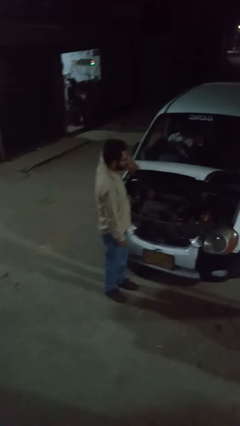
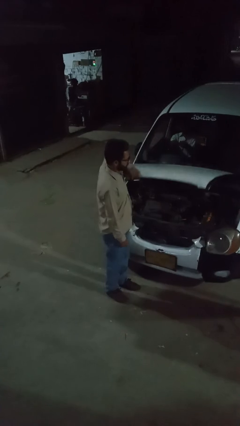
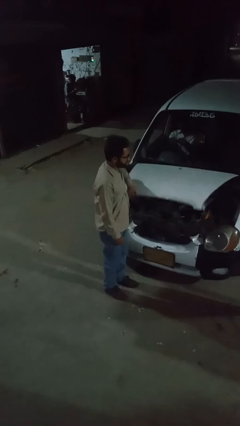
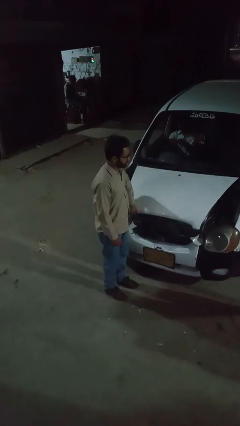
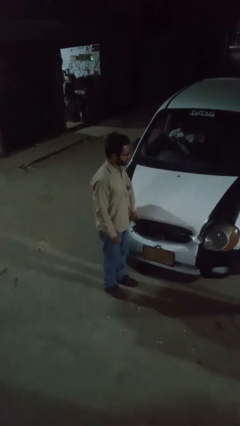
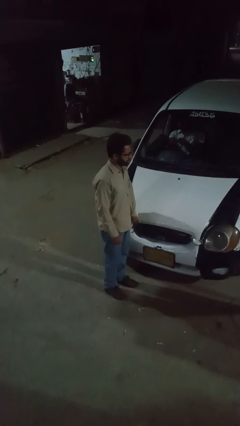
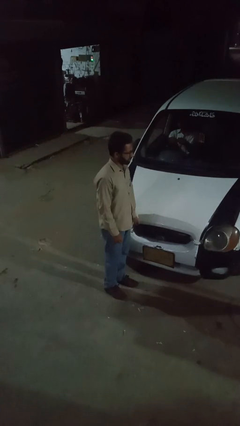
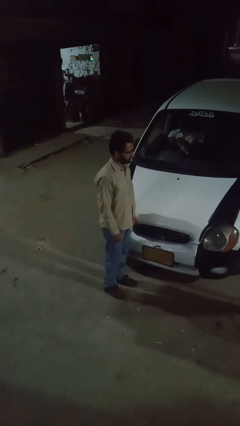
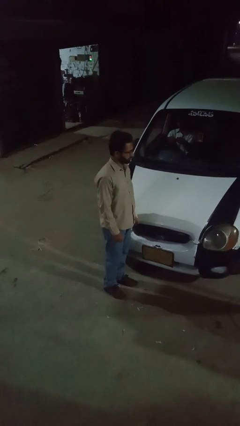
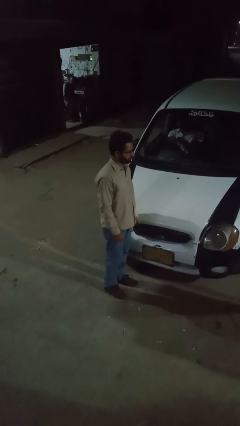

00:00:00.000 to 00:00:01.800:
person closes car hood

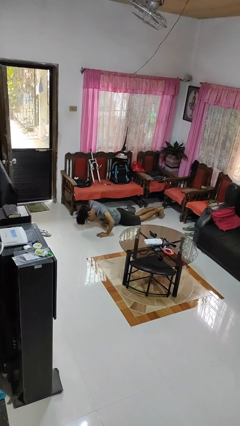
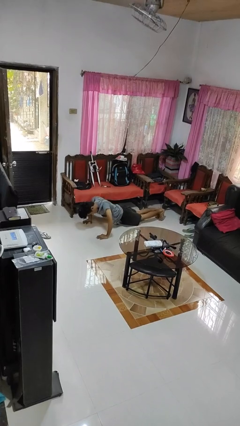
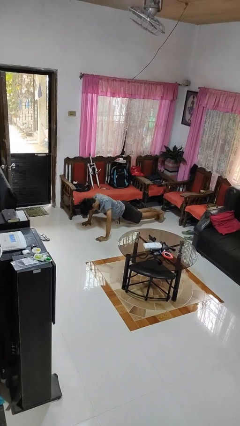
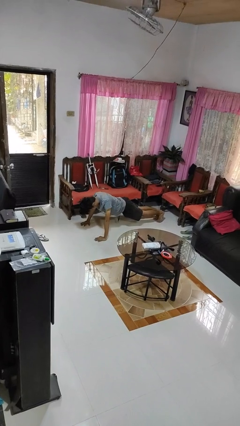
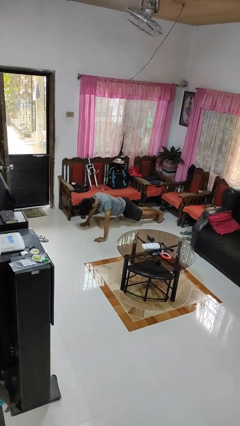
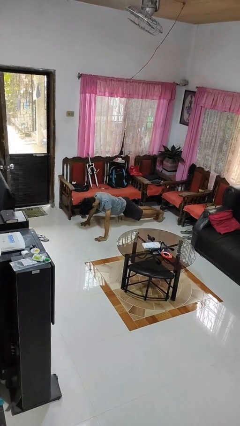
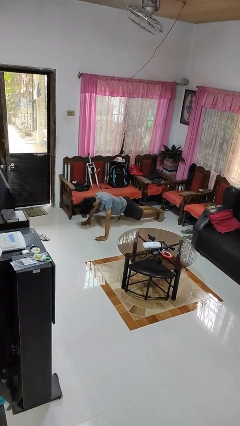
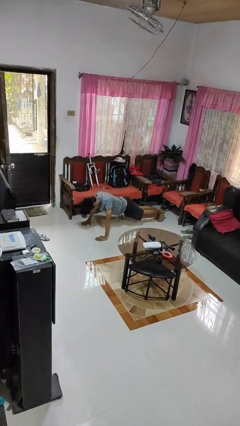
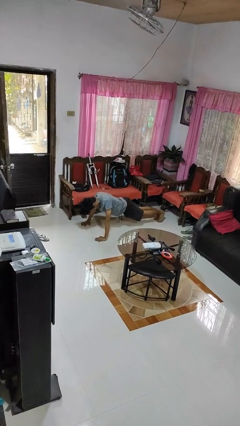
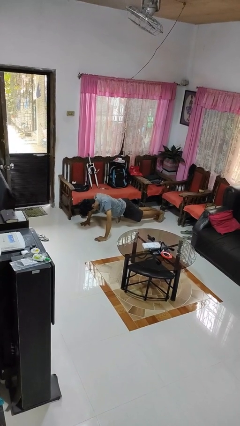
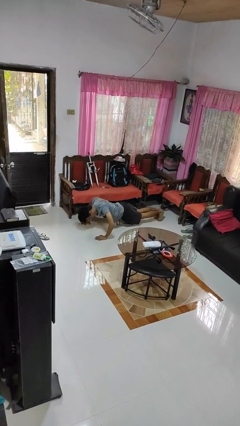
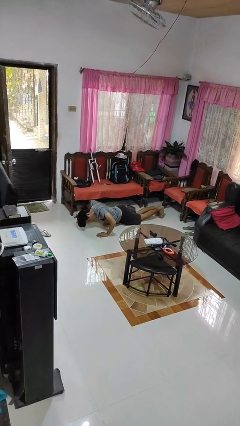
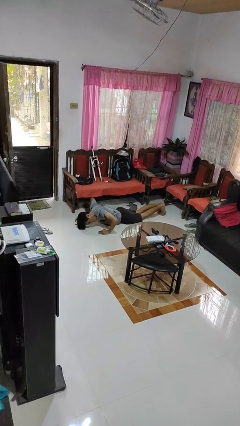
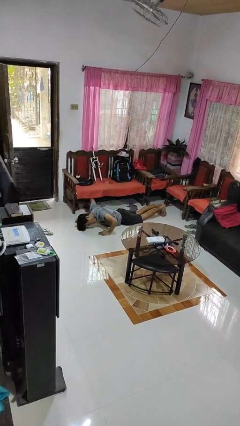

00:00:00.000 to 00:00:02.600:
person exercises with pushup

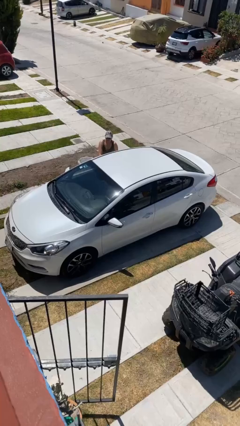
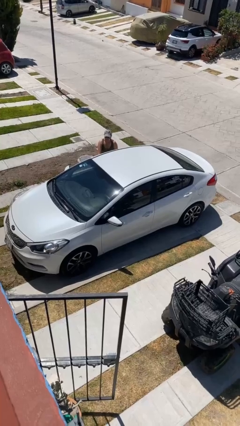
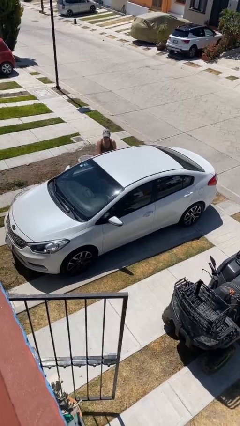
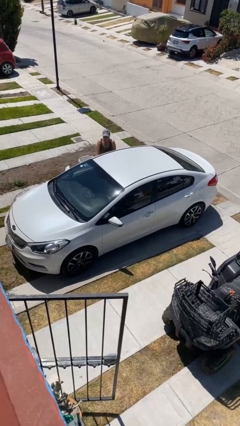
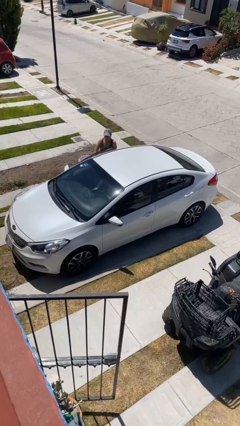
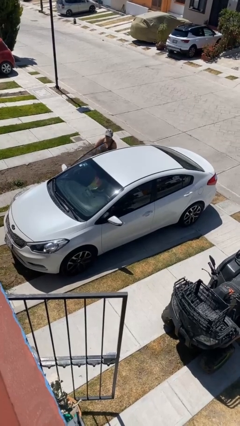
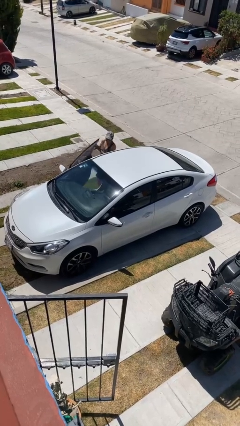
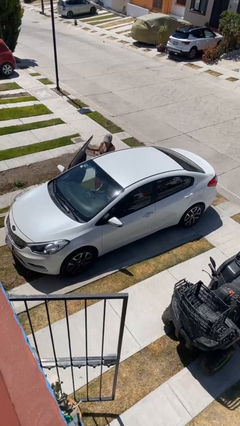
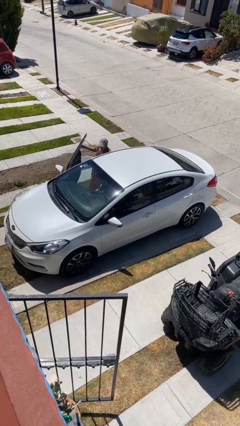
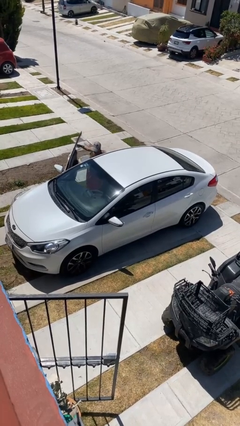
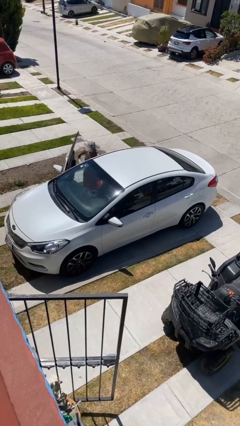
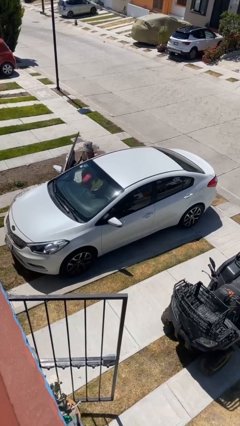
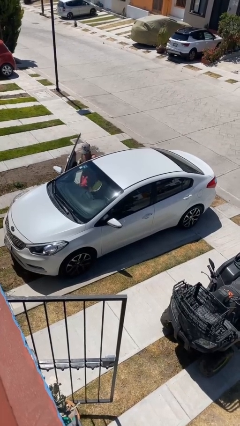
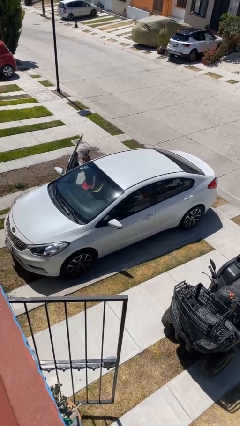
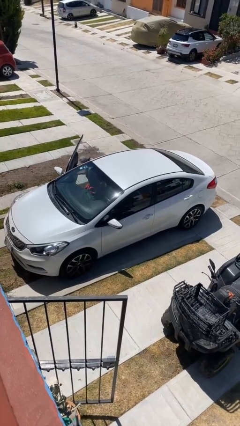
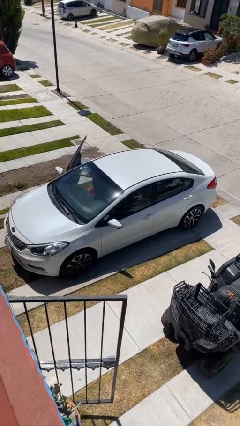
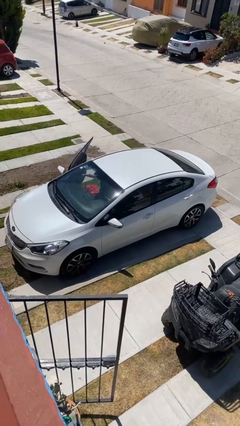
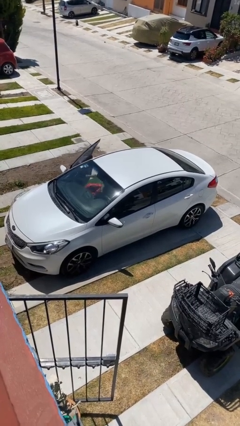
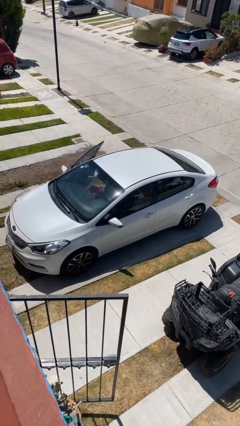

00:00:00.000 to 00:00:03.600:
car picks up person

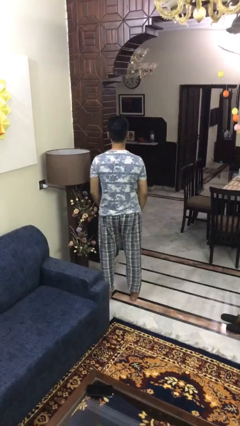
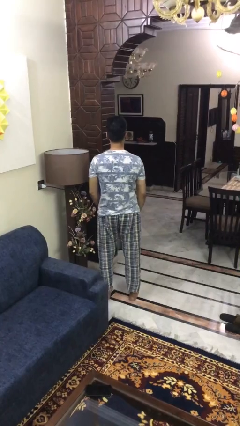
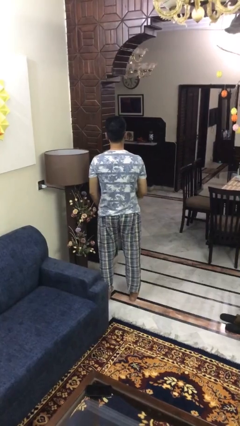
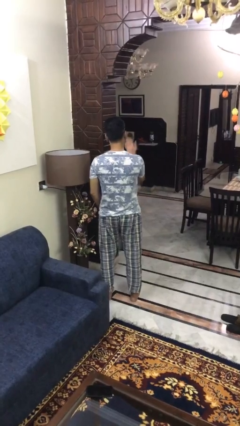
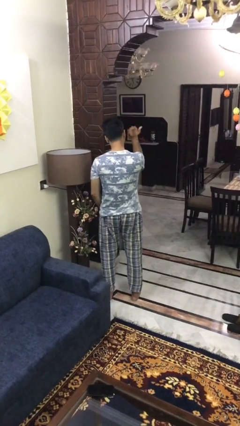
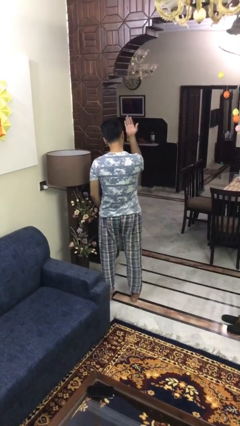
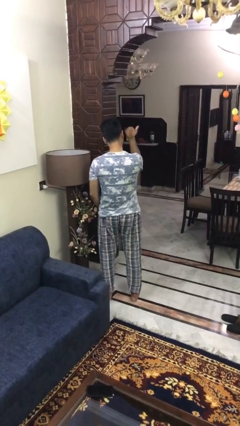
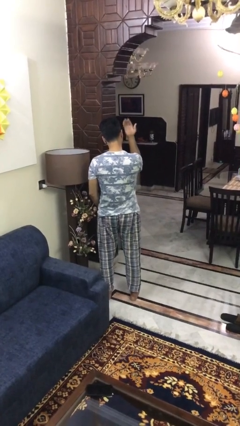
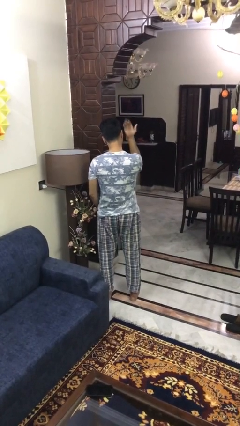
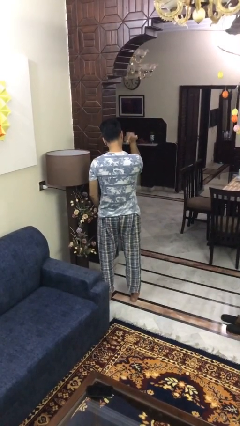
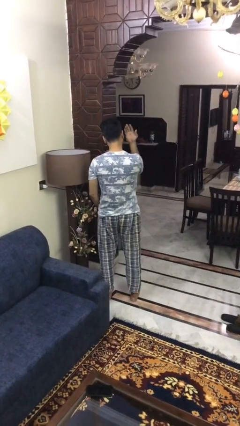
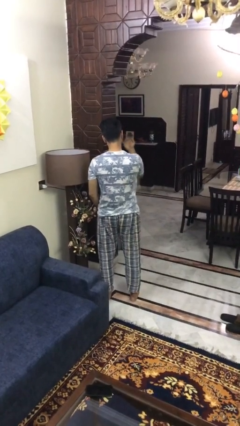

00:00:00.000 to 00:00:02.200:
person gestures come here

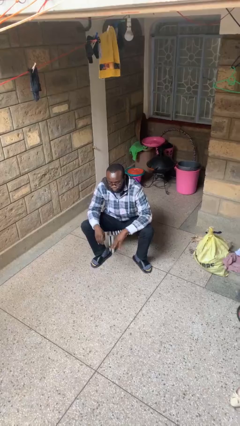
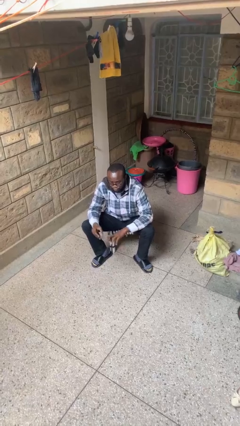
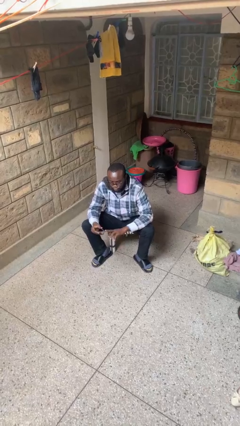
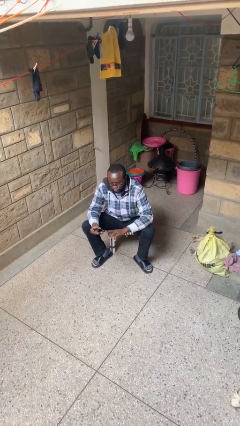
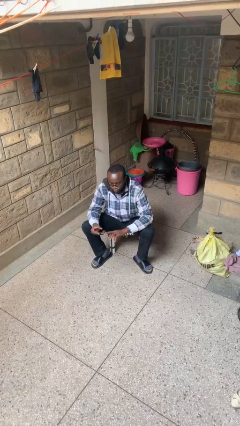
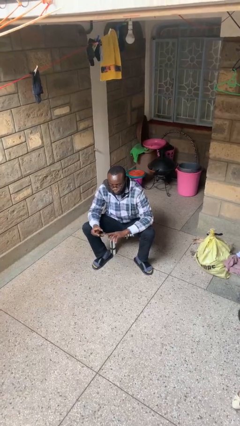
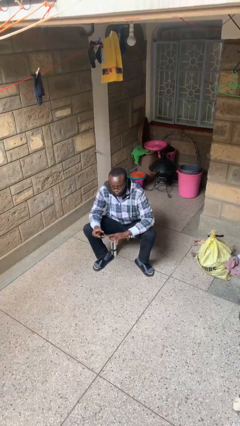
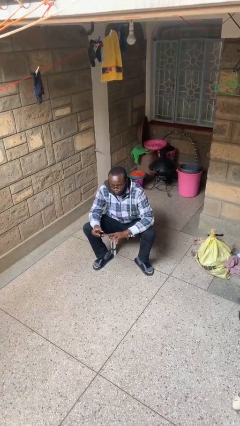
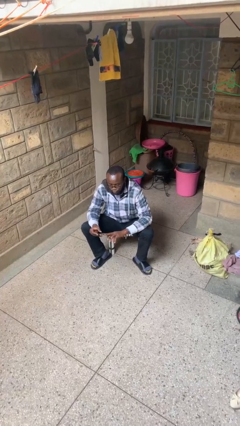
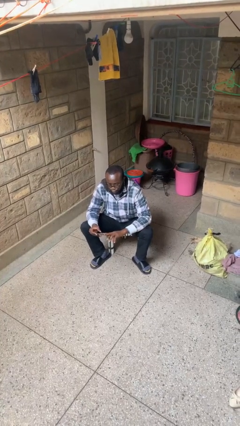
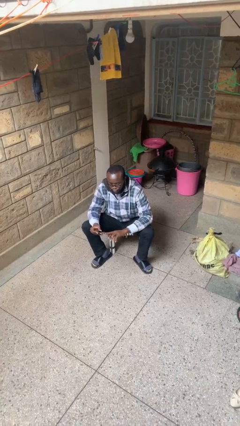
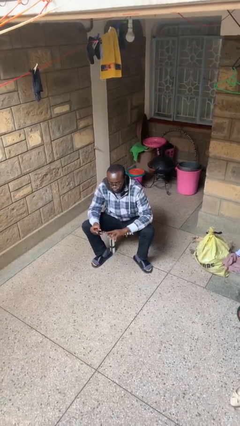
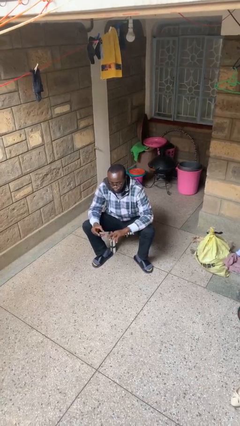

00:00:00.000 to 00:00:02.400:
person clips fingernails

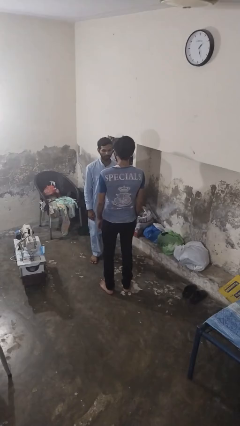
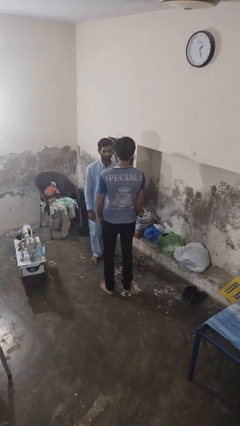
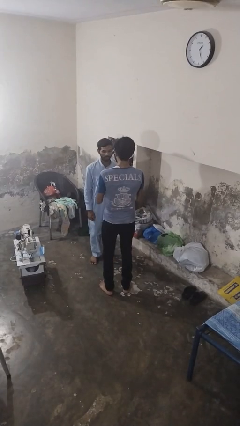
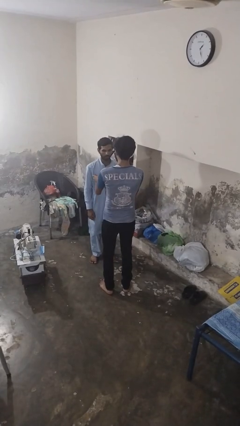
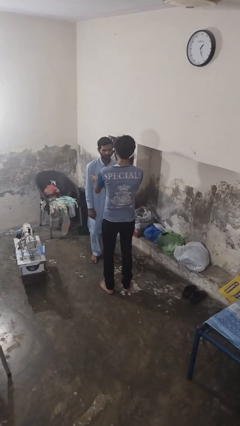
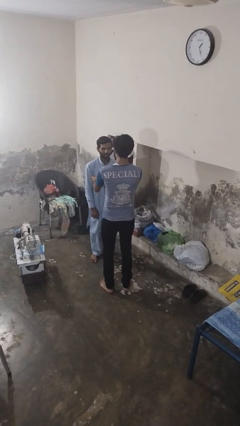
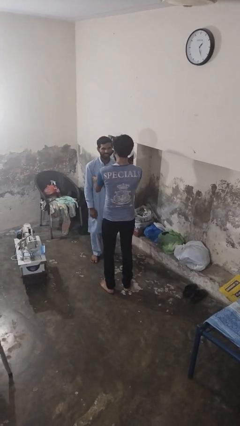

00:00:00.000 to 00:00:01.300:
person tickles person

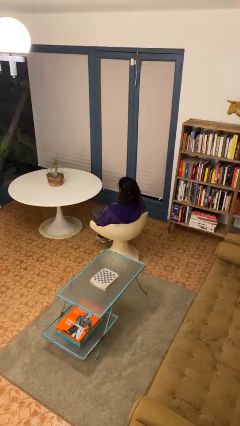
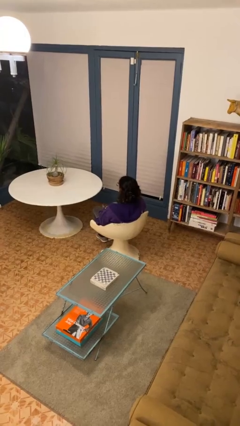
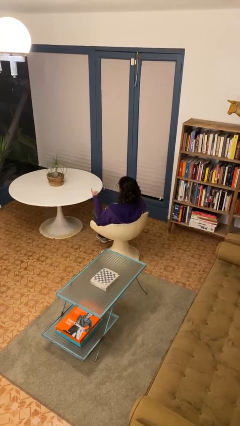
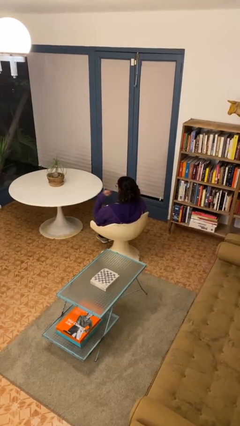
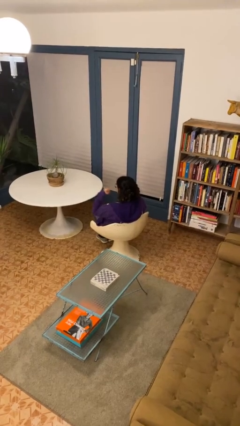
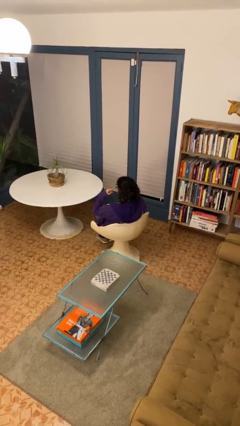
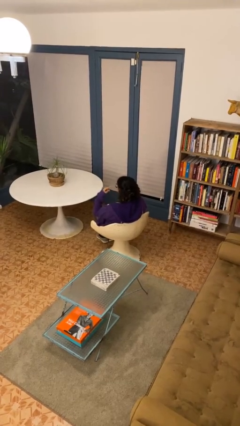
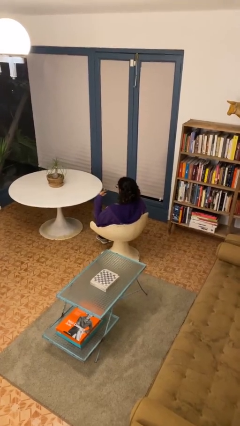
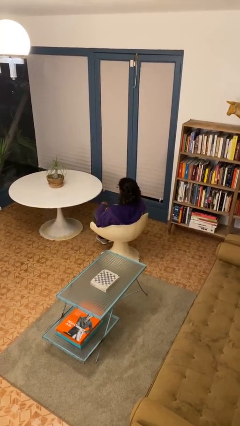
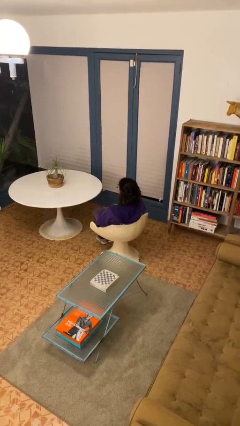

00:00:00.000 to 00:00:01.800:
person gestures listen closely

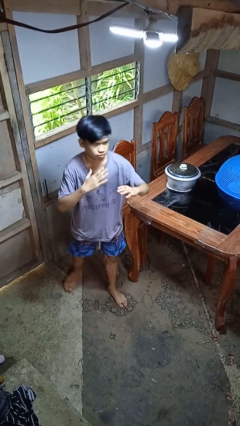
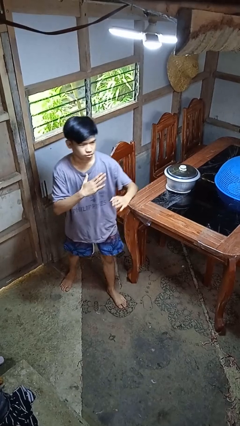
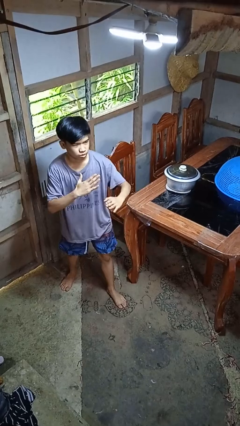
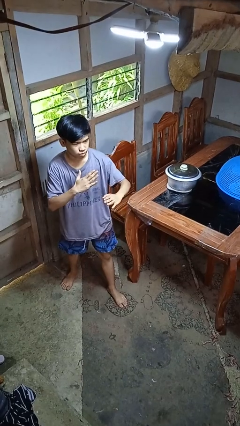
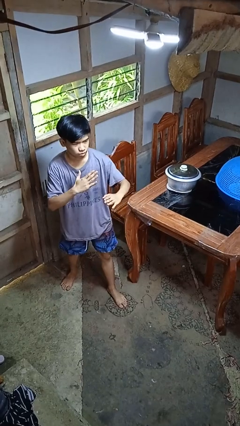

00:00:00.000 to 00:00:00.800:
person karate chop

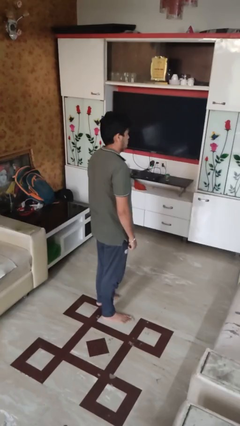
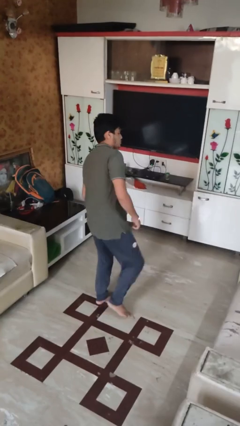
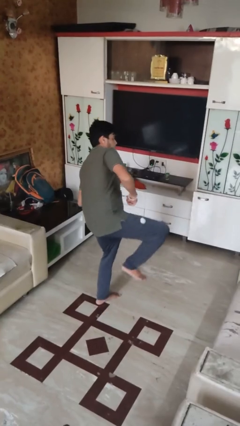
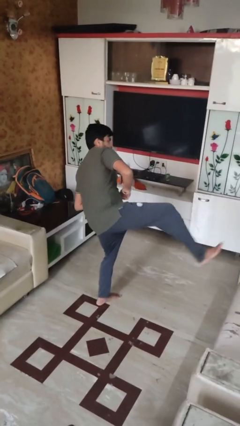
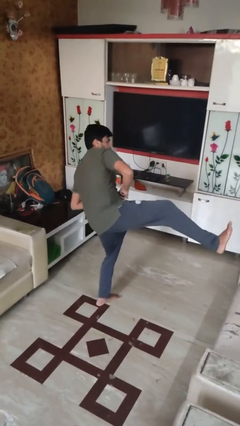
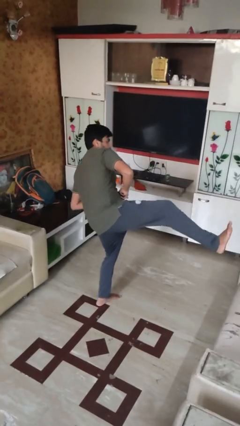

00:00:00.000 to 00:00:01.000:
person karate kicks
